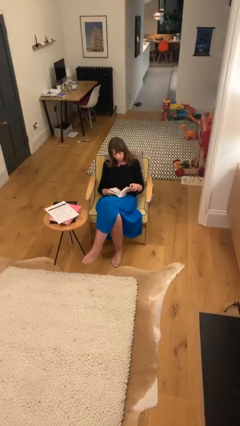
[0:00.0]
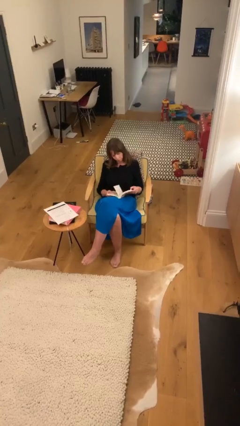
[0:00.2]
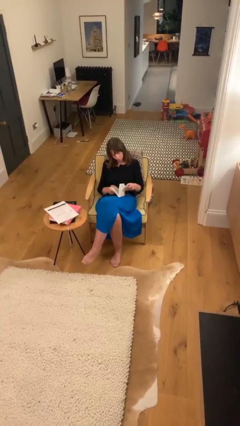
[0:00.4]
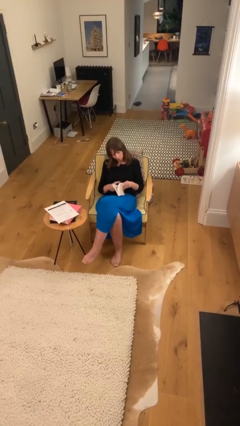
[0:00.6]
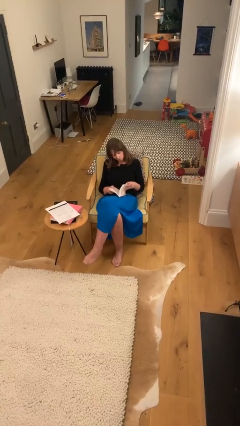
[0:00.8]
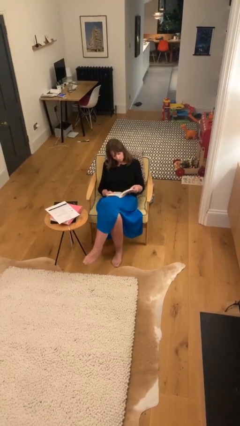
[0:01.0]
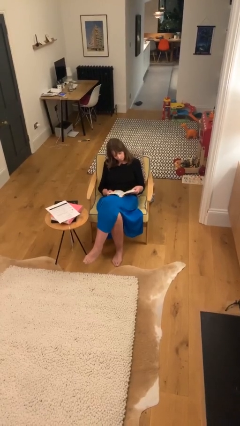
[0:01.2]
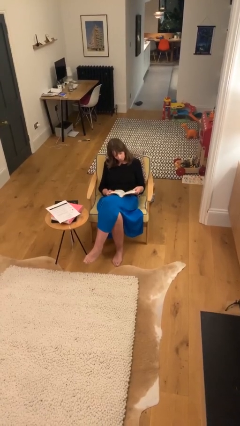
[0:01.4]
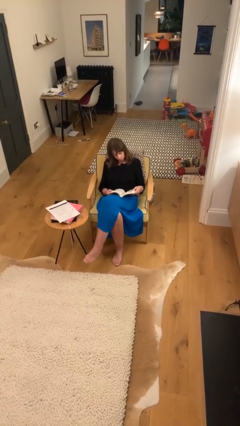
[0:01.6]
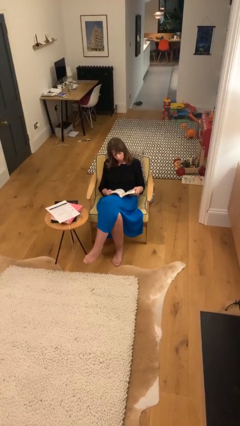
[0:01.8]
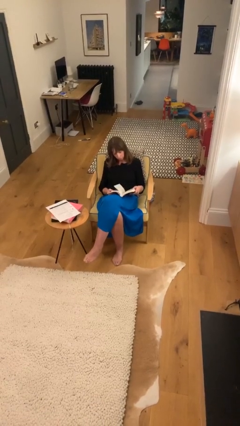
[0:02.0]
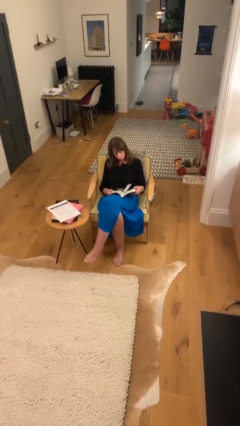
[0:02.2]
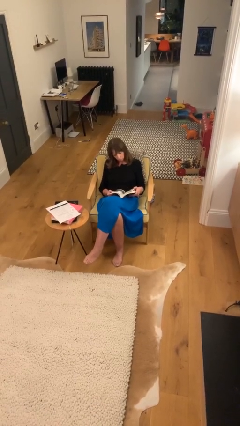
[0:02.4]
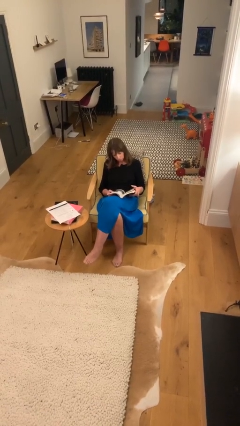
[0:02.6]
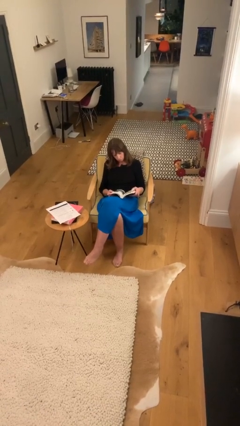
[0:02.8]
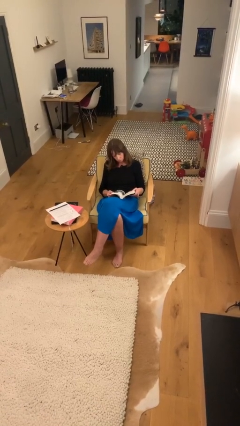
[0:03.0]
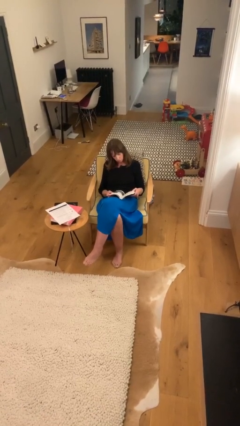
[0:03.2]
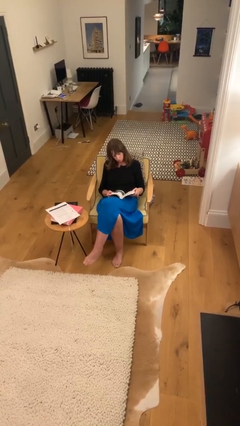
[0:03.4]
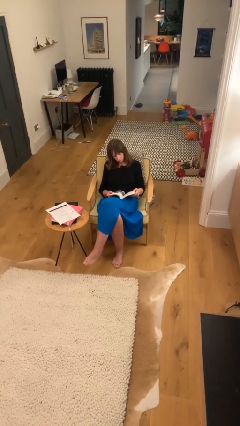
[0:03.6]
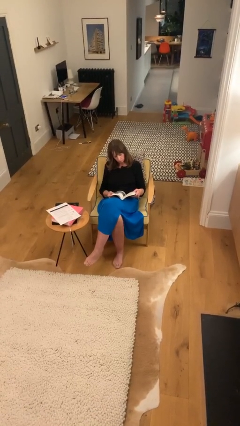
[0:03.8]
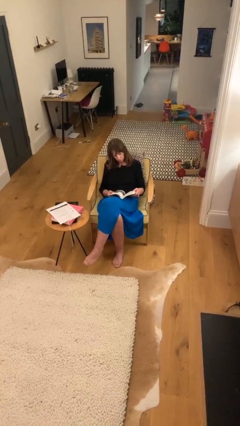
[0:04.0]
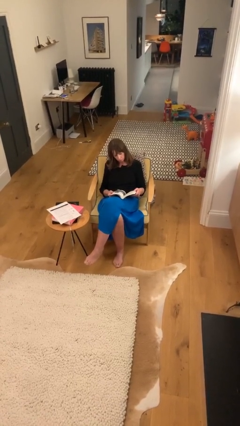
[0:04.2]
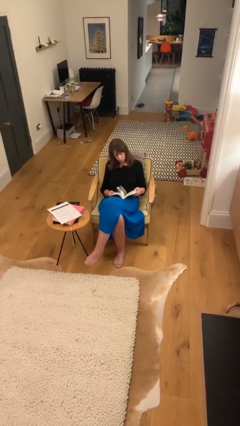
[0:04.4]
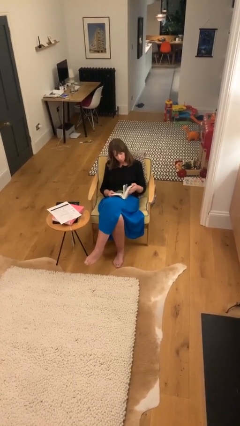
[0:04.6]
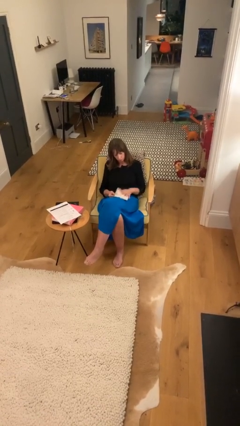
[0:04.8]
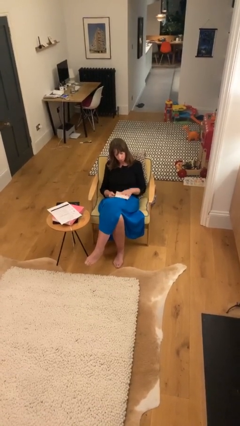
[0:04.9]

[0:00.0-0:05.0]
person reads document

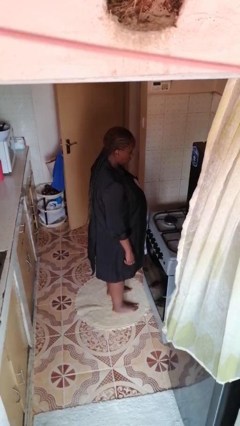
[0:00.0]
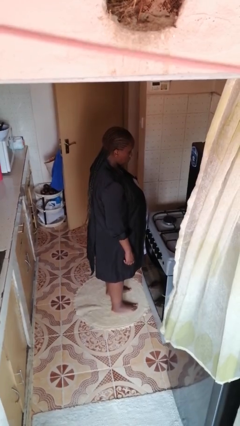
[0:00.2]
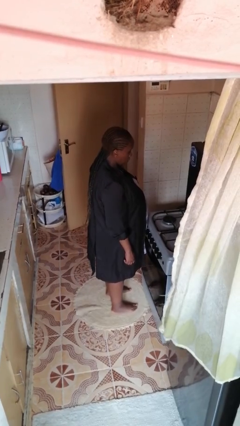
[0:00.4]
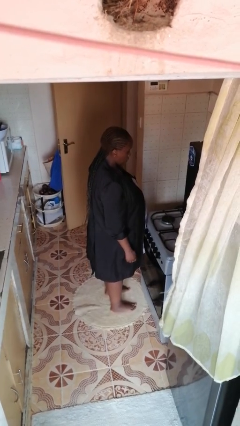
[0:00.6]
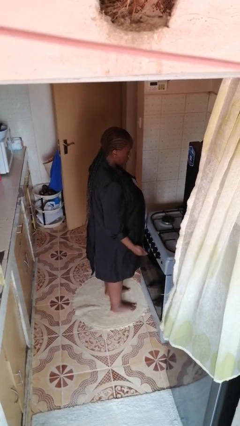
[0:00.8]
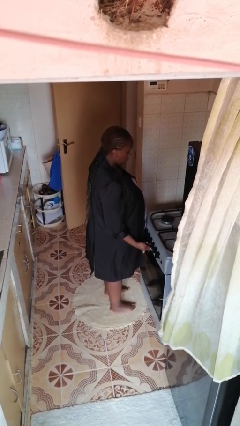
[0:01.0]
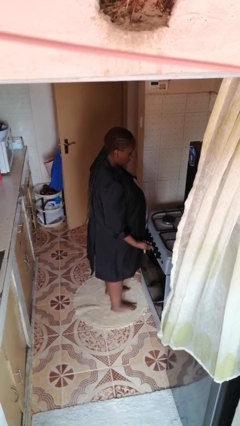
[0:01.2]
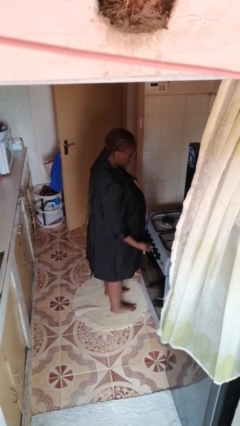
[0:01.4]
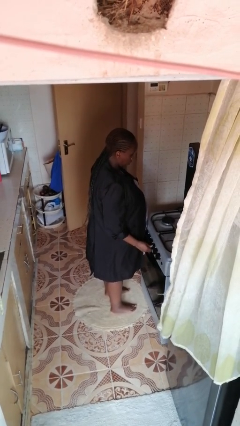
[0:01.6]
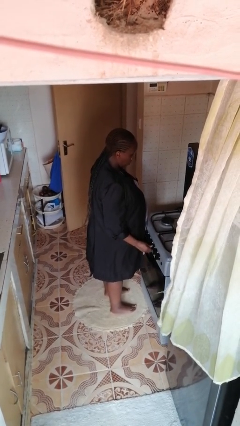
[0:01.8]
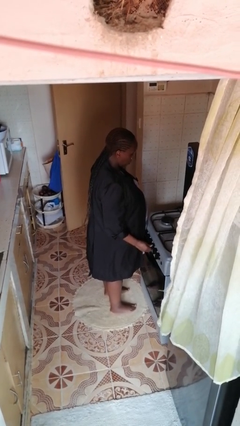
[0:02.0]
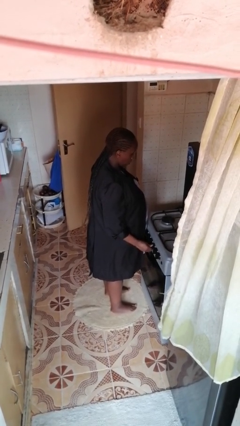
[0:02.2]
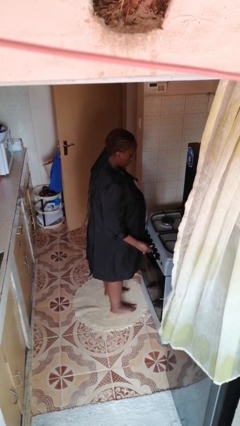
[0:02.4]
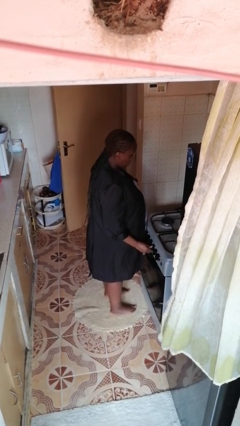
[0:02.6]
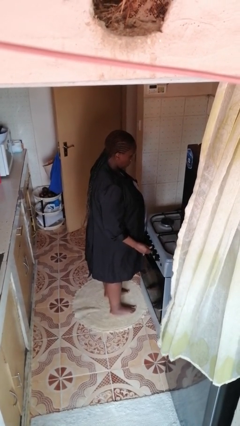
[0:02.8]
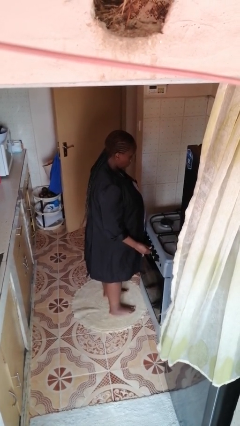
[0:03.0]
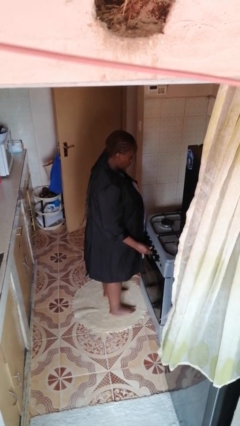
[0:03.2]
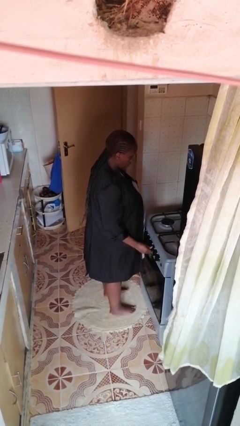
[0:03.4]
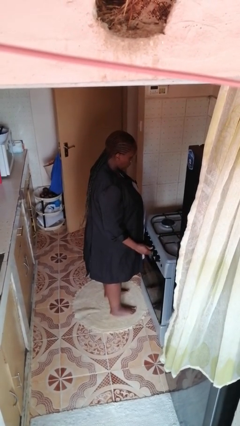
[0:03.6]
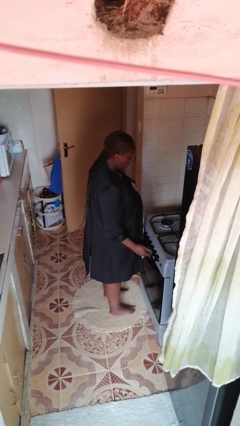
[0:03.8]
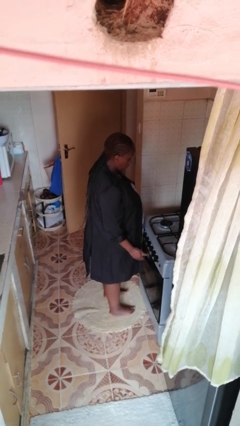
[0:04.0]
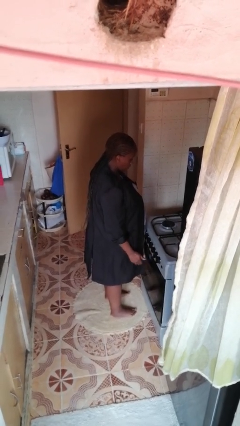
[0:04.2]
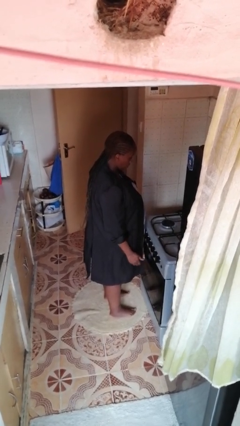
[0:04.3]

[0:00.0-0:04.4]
person turns on stovetop

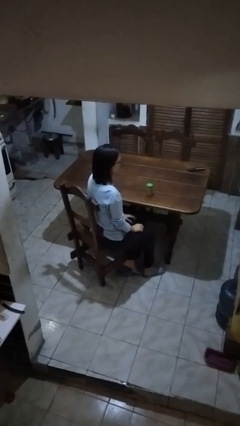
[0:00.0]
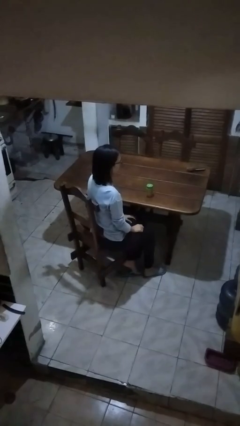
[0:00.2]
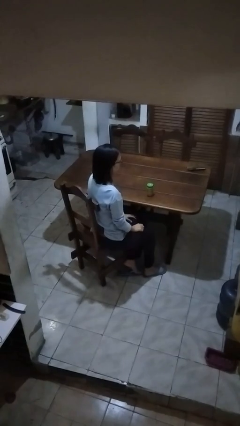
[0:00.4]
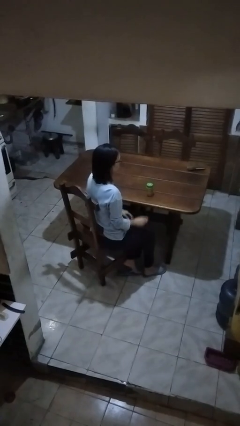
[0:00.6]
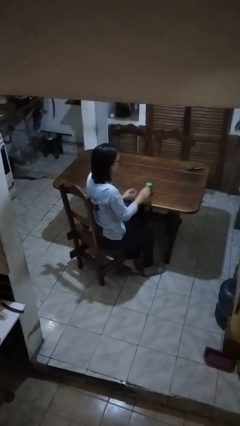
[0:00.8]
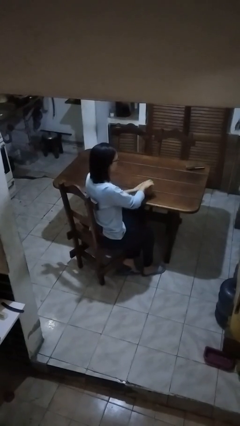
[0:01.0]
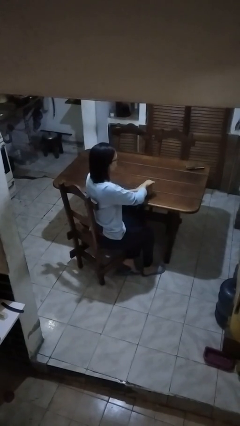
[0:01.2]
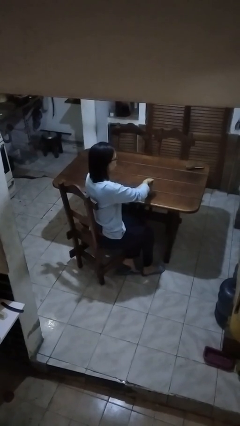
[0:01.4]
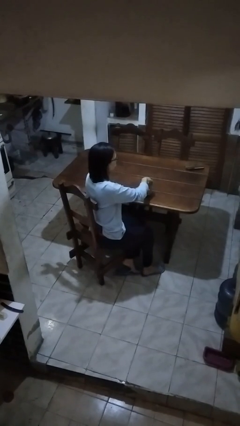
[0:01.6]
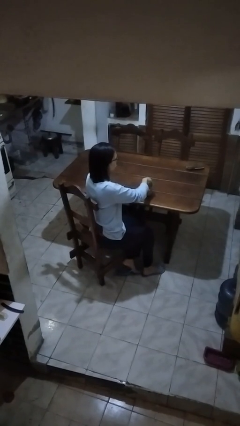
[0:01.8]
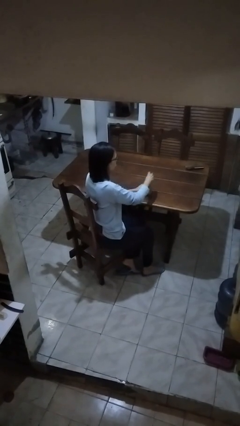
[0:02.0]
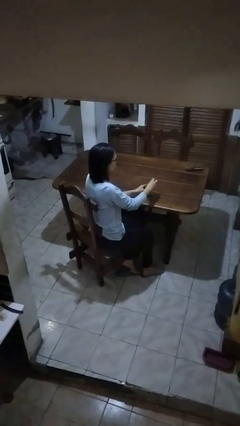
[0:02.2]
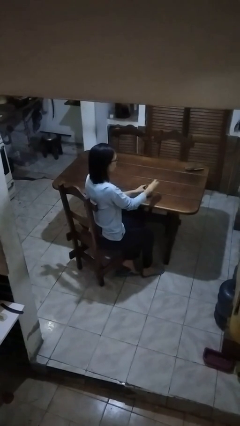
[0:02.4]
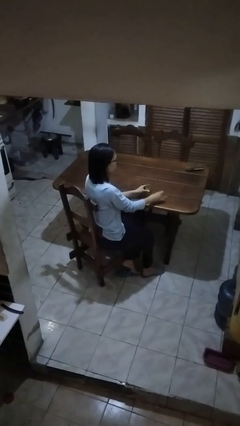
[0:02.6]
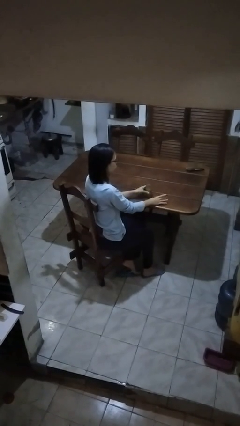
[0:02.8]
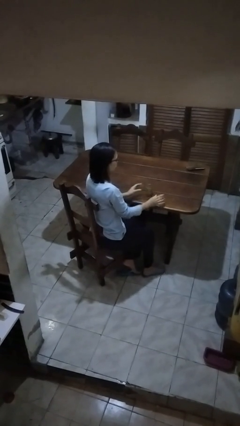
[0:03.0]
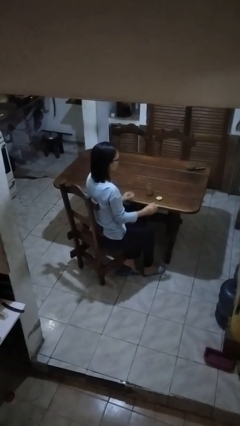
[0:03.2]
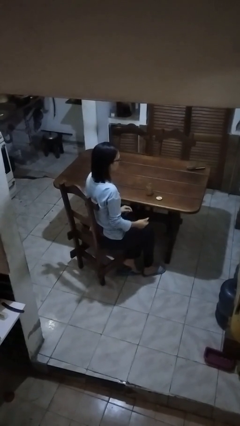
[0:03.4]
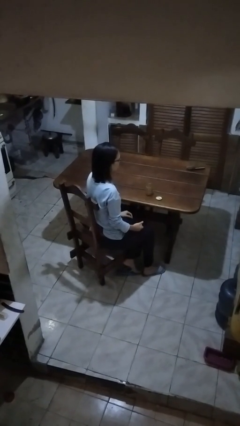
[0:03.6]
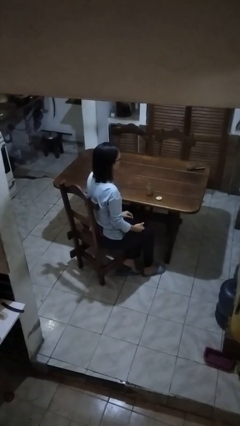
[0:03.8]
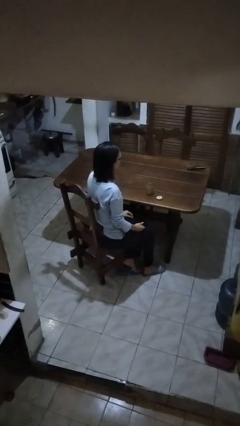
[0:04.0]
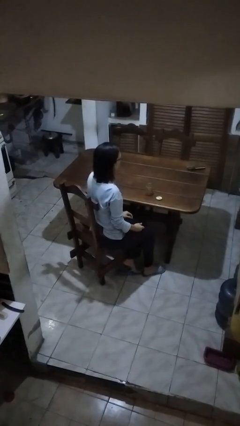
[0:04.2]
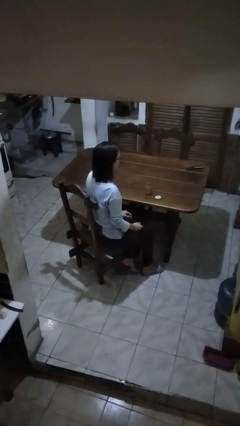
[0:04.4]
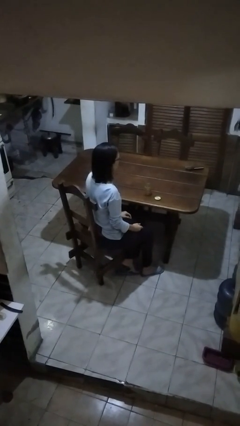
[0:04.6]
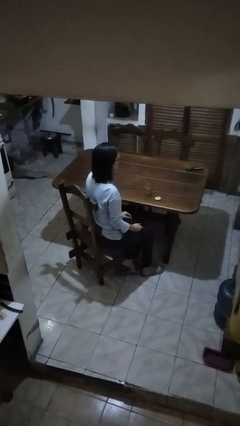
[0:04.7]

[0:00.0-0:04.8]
person opens jar

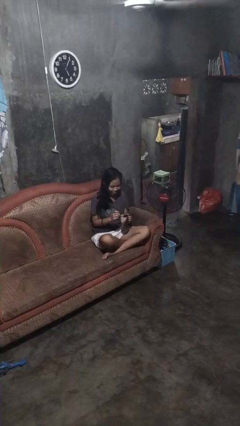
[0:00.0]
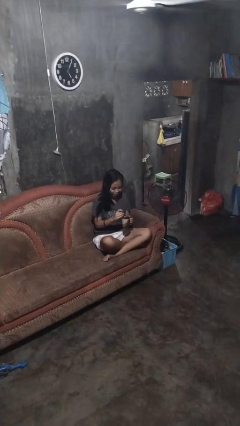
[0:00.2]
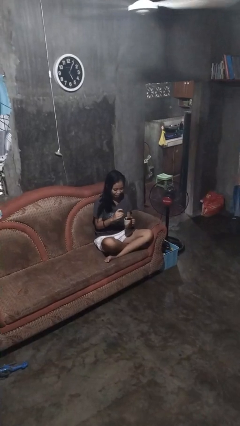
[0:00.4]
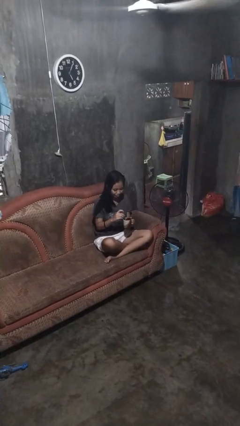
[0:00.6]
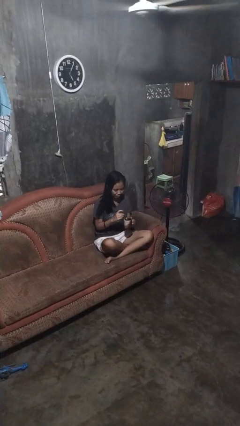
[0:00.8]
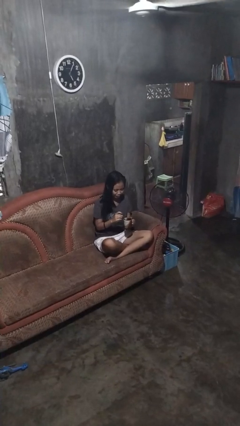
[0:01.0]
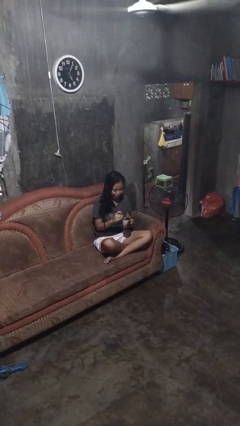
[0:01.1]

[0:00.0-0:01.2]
person stirs mug

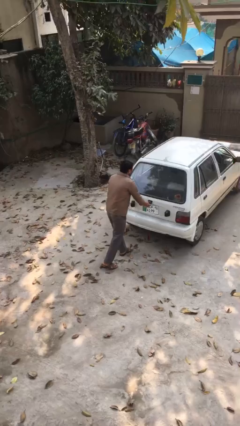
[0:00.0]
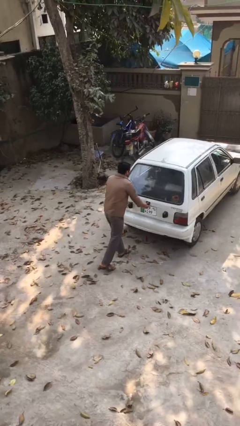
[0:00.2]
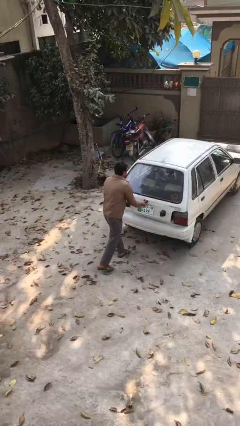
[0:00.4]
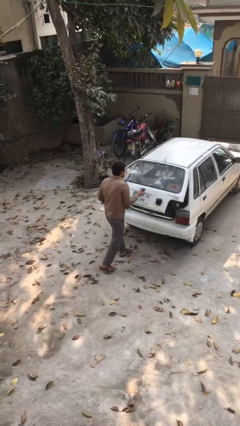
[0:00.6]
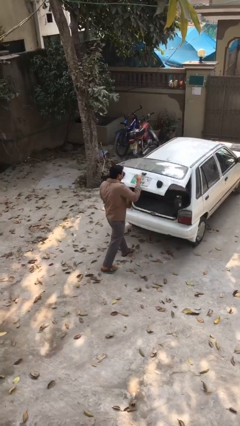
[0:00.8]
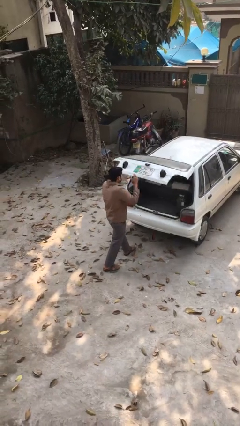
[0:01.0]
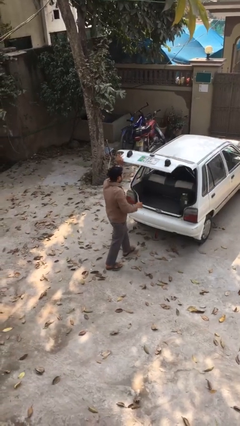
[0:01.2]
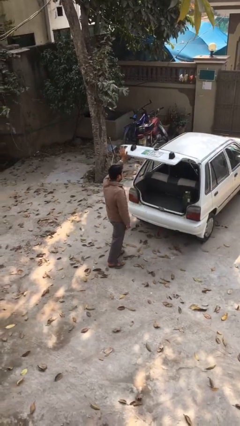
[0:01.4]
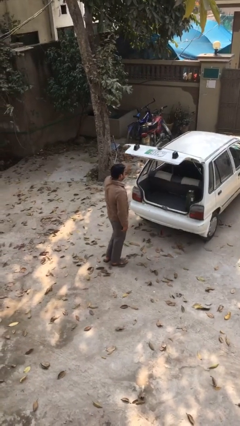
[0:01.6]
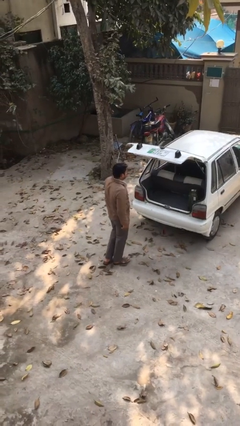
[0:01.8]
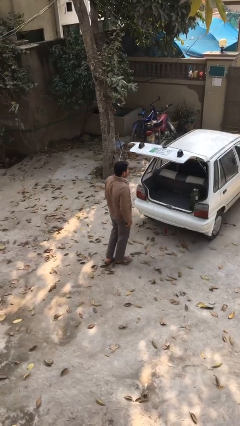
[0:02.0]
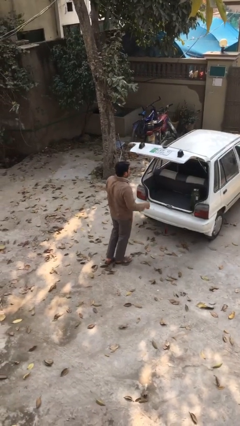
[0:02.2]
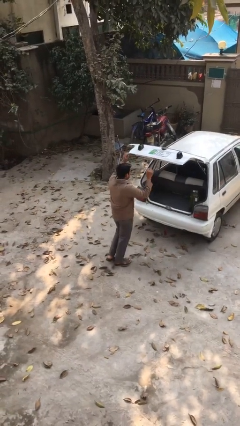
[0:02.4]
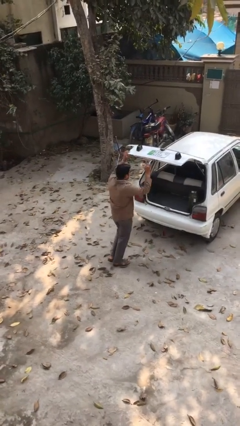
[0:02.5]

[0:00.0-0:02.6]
person opens car trunk
